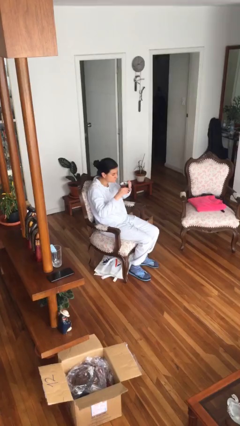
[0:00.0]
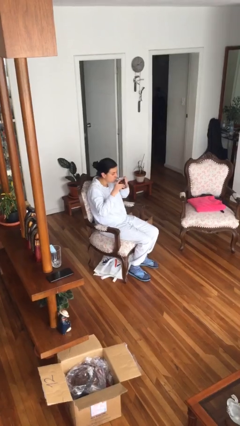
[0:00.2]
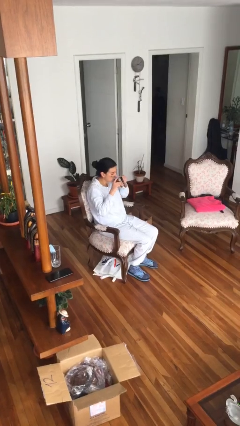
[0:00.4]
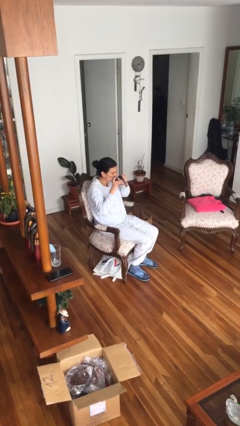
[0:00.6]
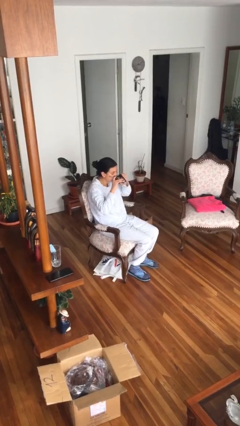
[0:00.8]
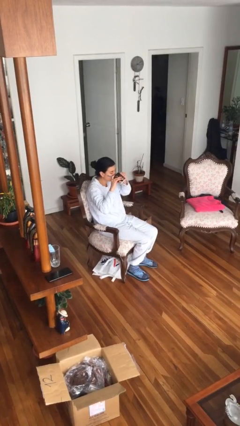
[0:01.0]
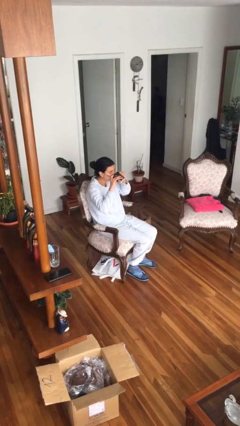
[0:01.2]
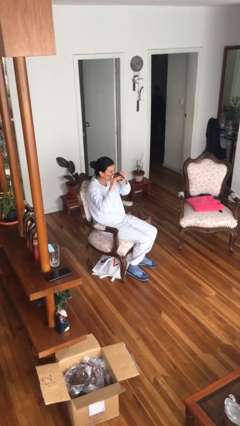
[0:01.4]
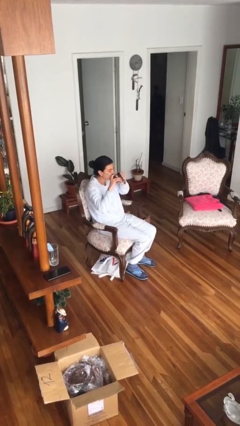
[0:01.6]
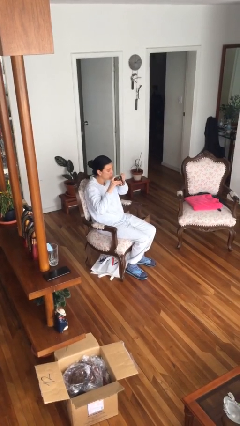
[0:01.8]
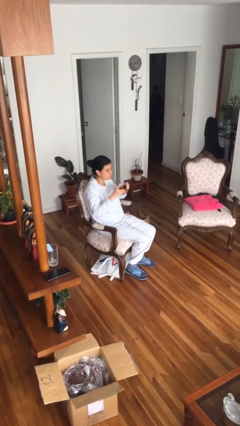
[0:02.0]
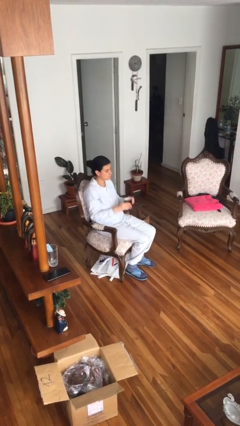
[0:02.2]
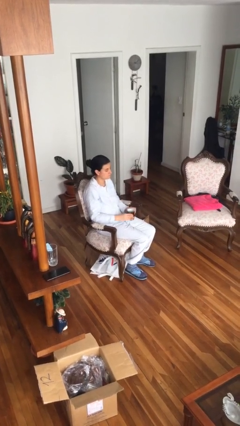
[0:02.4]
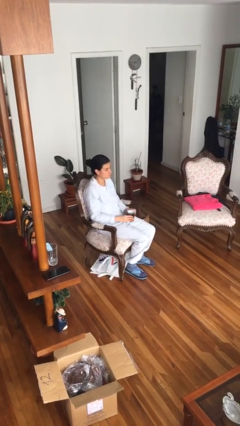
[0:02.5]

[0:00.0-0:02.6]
person drinks from mug

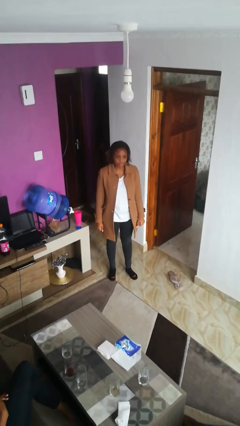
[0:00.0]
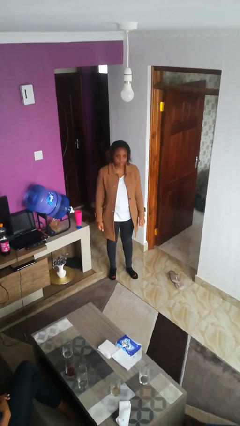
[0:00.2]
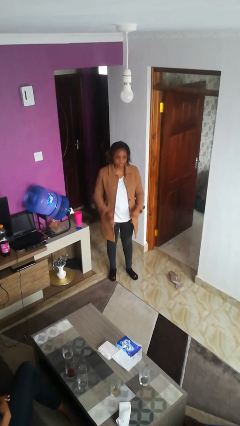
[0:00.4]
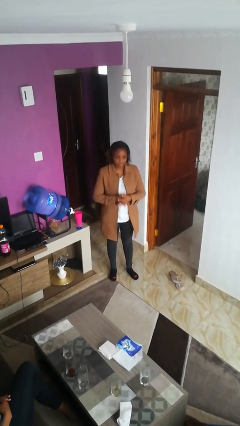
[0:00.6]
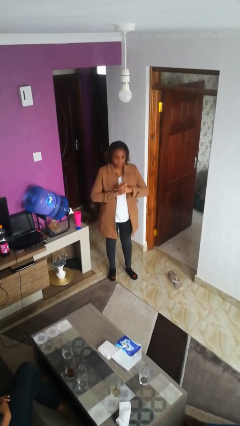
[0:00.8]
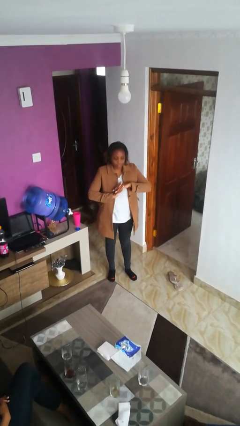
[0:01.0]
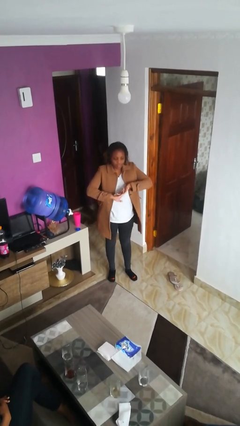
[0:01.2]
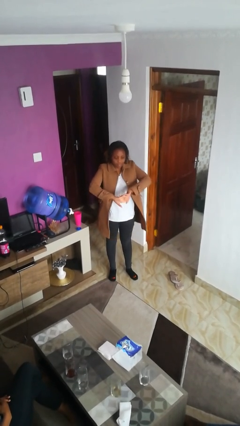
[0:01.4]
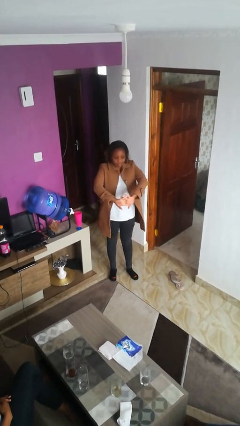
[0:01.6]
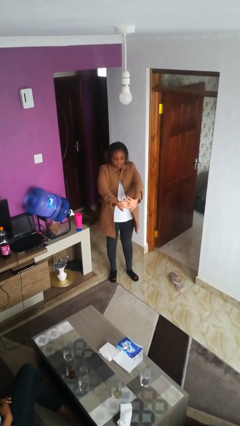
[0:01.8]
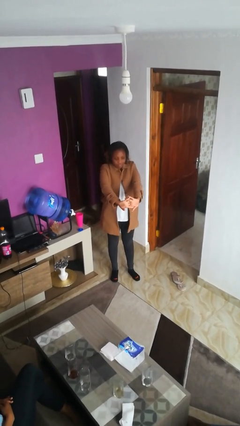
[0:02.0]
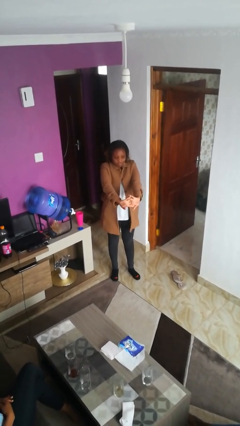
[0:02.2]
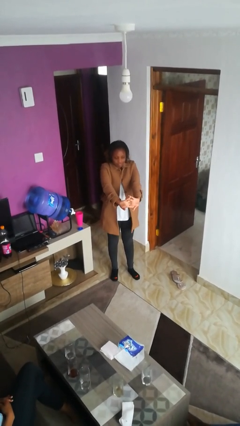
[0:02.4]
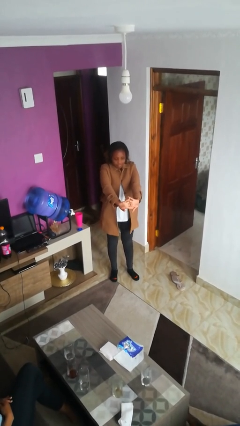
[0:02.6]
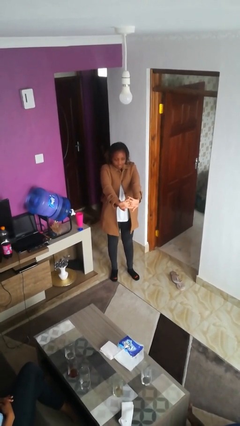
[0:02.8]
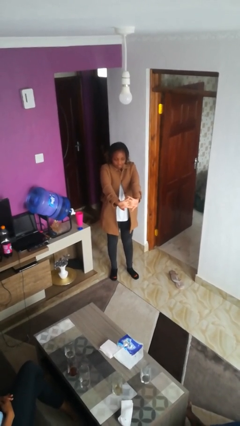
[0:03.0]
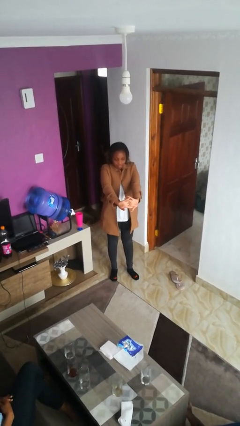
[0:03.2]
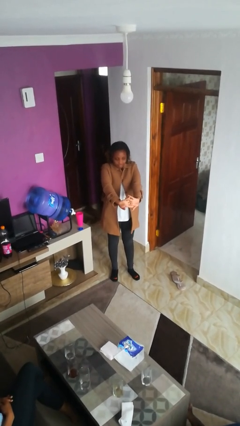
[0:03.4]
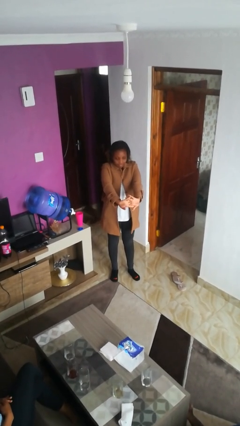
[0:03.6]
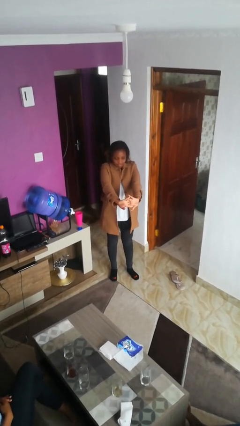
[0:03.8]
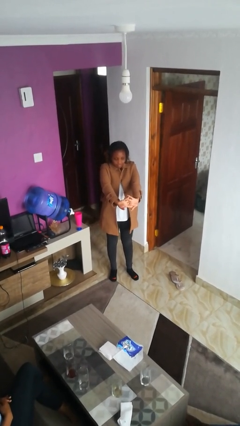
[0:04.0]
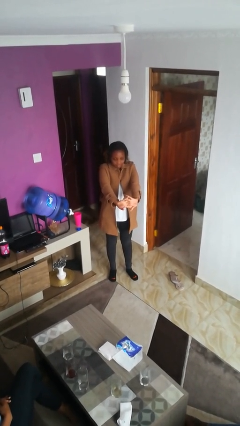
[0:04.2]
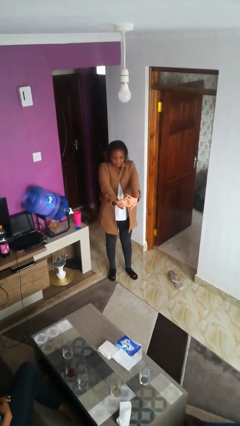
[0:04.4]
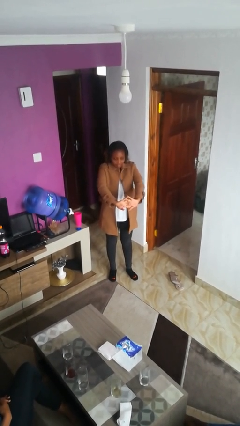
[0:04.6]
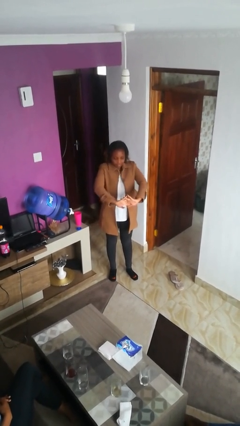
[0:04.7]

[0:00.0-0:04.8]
person cracks knuckles

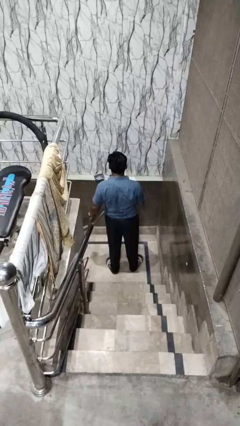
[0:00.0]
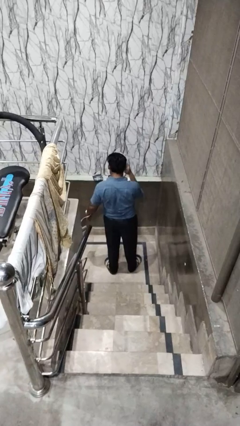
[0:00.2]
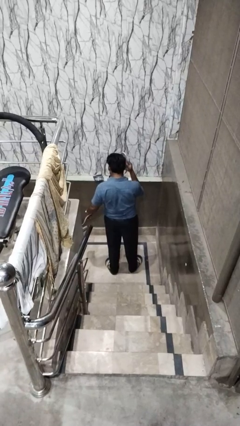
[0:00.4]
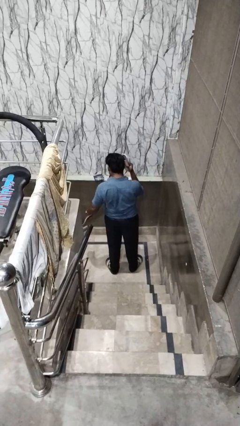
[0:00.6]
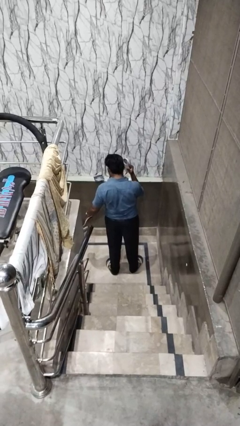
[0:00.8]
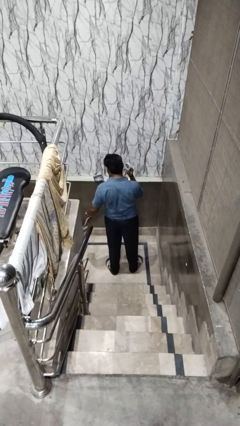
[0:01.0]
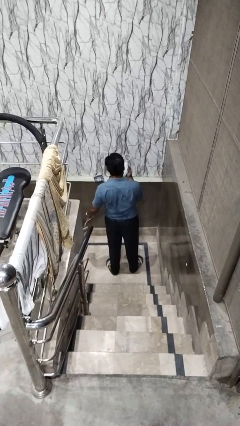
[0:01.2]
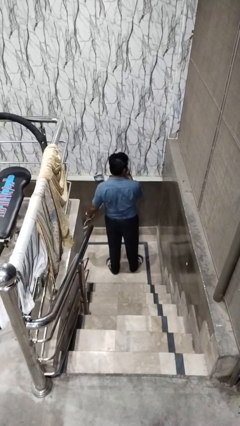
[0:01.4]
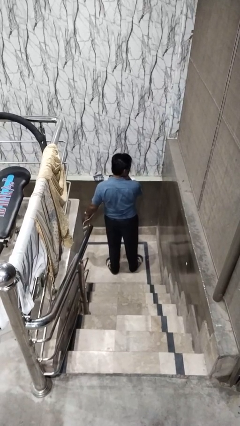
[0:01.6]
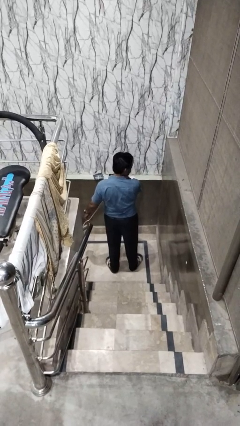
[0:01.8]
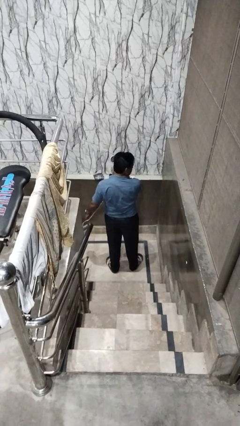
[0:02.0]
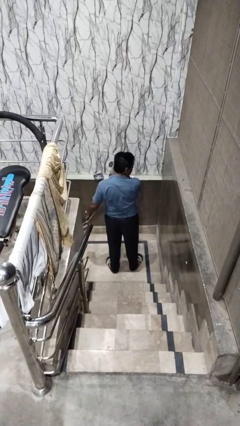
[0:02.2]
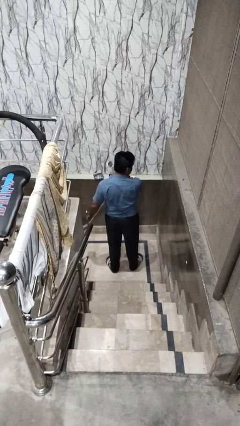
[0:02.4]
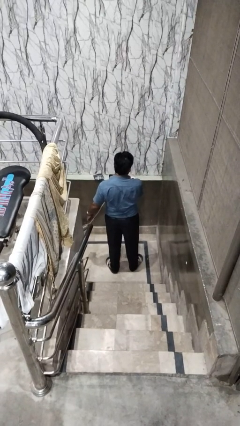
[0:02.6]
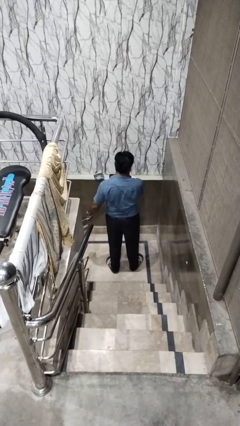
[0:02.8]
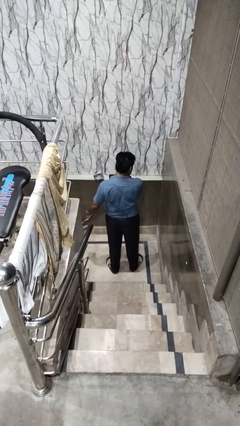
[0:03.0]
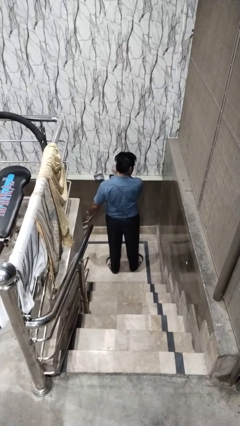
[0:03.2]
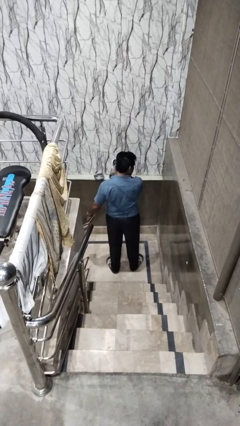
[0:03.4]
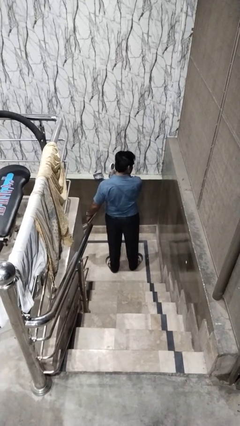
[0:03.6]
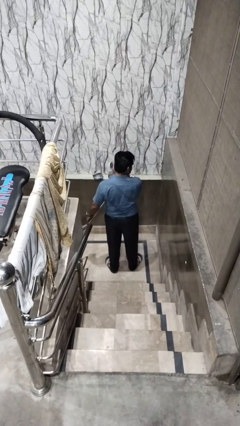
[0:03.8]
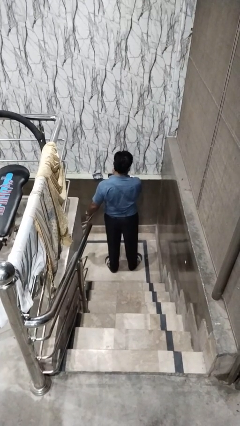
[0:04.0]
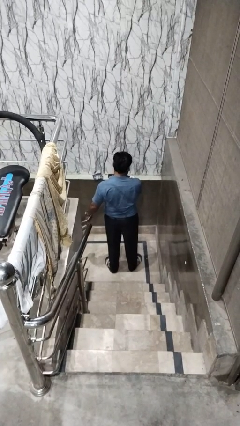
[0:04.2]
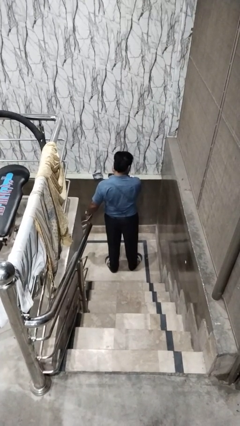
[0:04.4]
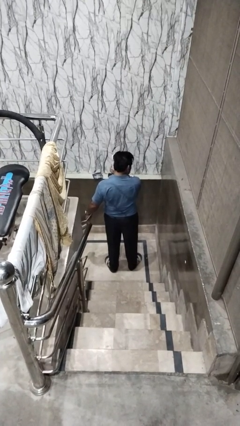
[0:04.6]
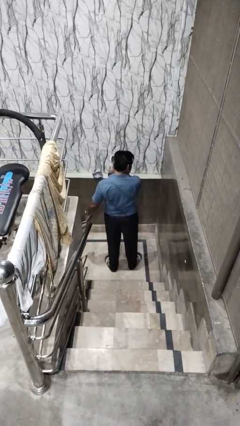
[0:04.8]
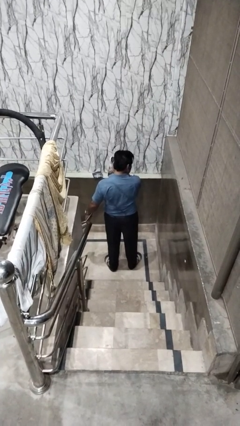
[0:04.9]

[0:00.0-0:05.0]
person dries hair with hairdryer

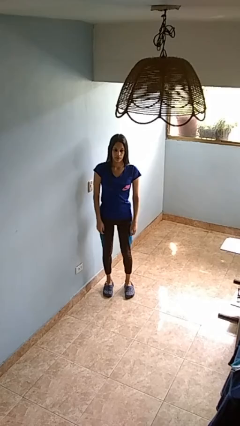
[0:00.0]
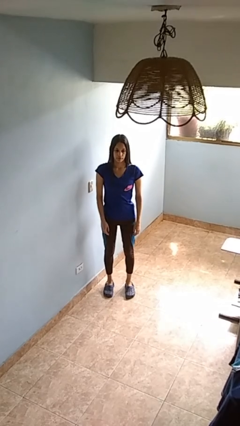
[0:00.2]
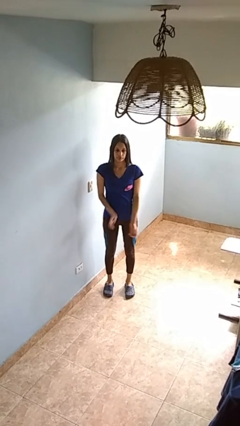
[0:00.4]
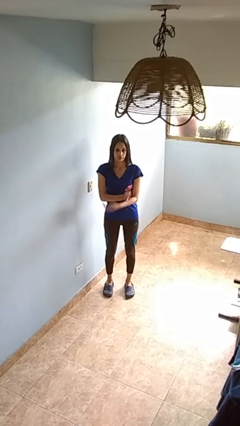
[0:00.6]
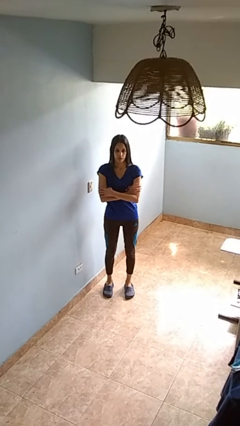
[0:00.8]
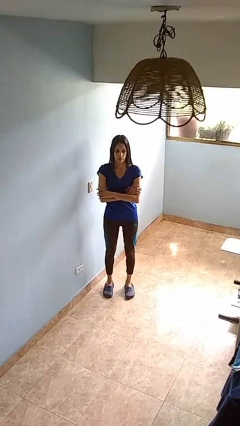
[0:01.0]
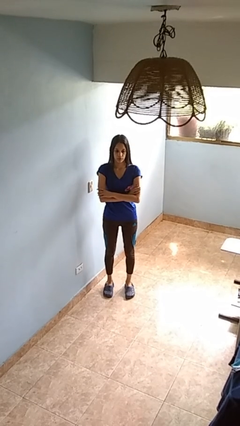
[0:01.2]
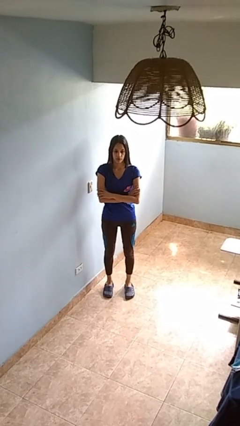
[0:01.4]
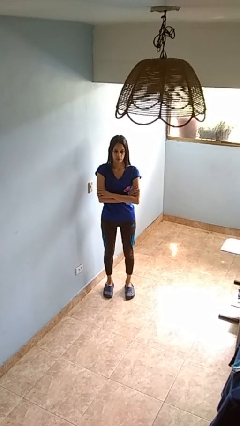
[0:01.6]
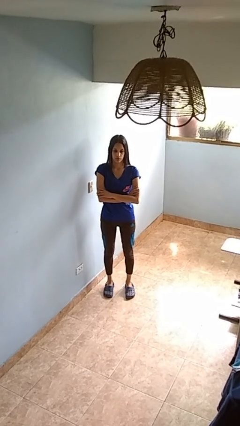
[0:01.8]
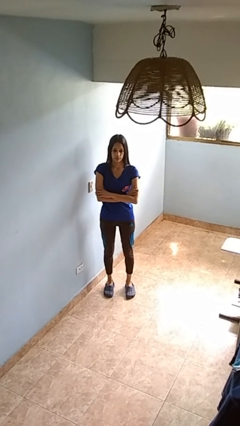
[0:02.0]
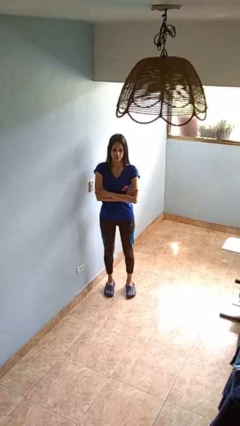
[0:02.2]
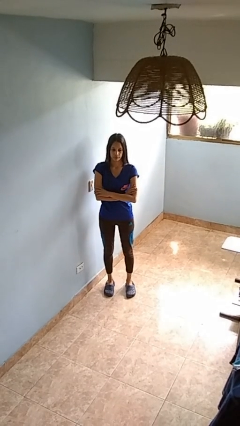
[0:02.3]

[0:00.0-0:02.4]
person crosses arms

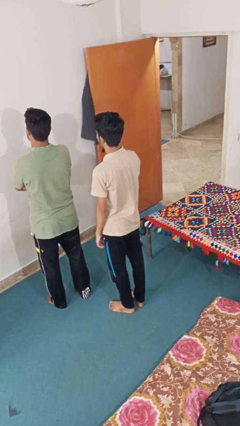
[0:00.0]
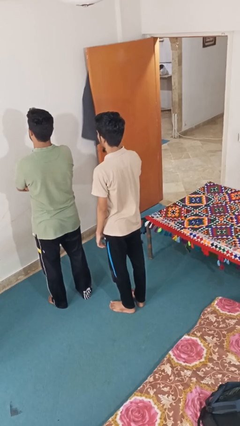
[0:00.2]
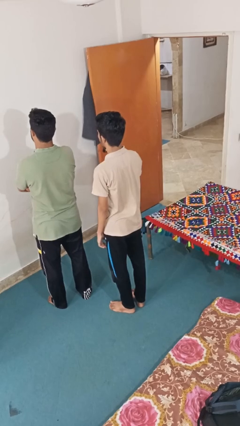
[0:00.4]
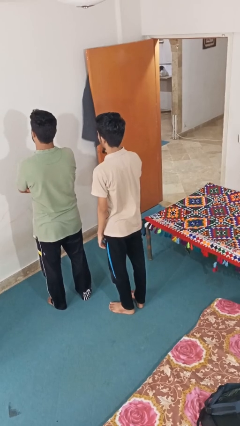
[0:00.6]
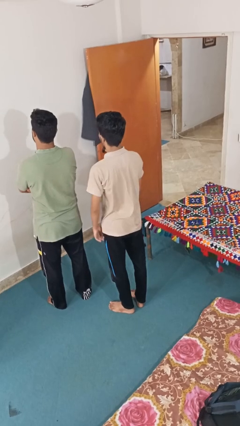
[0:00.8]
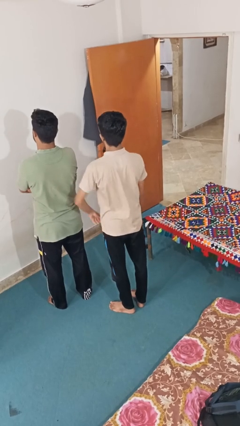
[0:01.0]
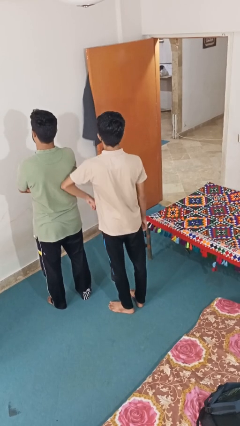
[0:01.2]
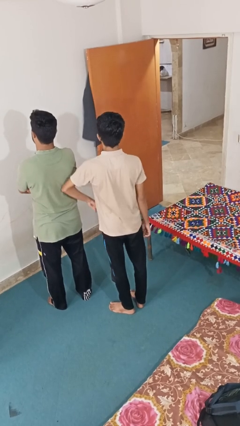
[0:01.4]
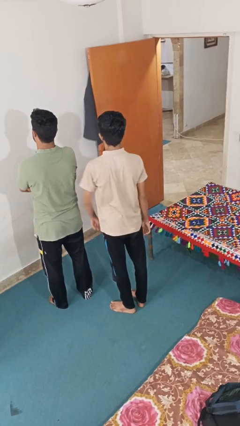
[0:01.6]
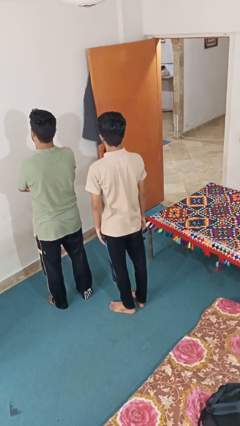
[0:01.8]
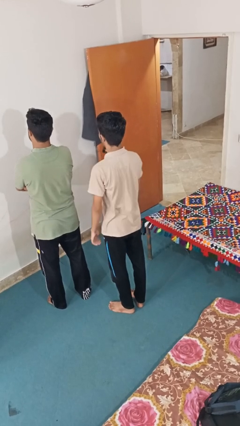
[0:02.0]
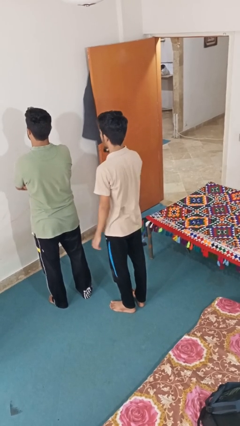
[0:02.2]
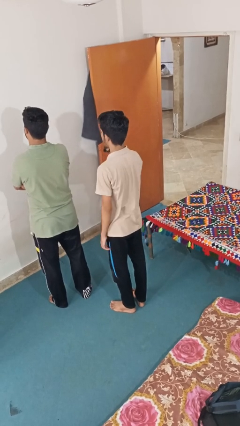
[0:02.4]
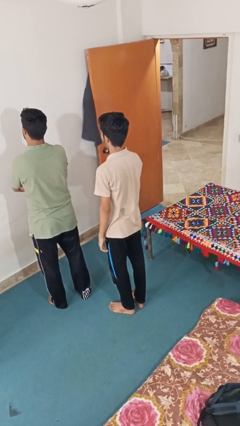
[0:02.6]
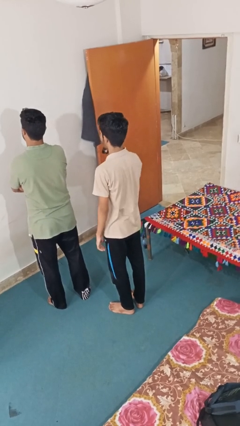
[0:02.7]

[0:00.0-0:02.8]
person nudges person with elbow
